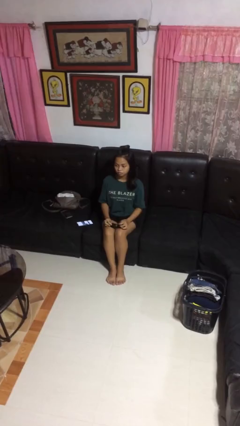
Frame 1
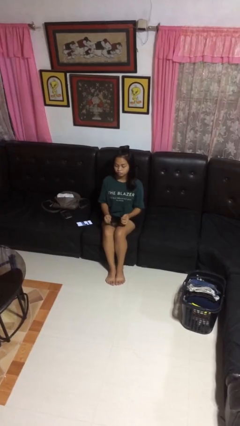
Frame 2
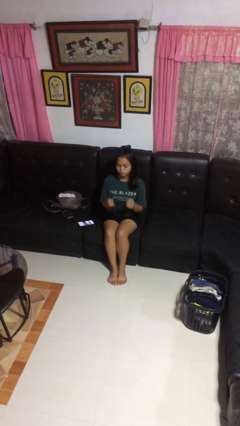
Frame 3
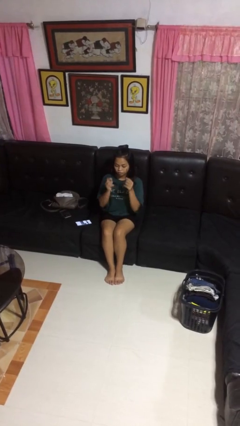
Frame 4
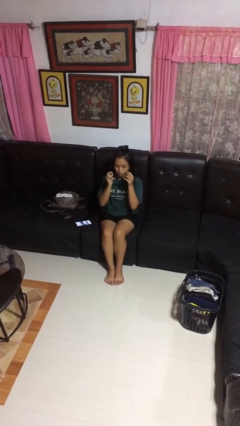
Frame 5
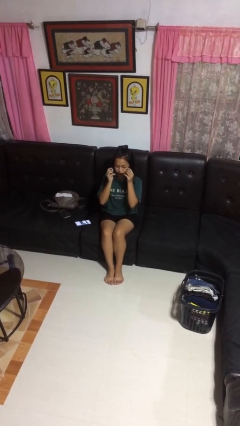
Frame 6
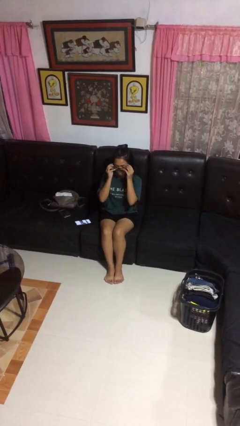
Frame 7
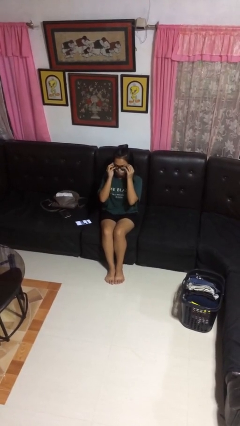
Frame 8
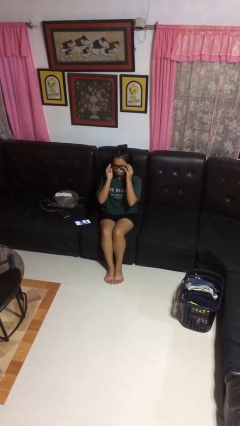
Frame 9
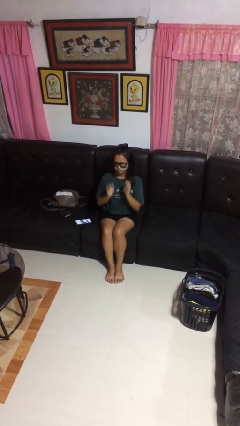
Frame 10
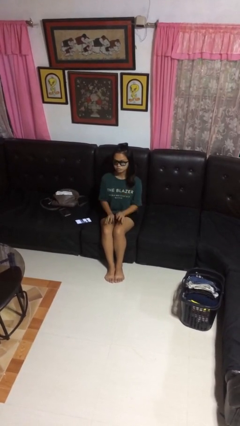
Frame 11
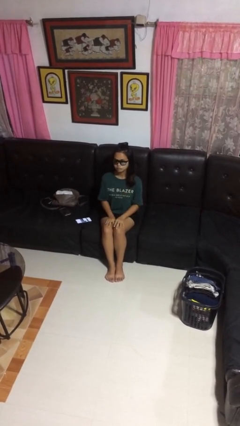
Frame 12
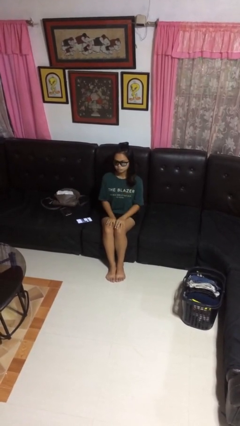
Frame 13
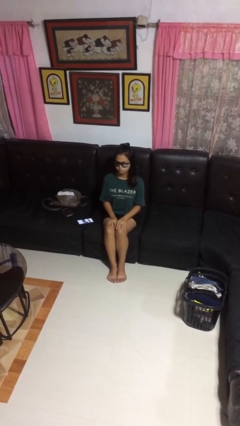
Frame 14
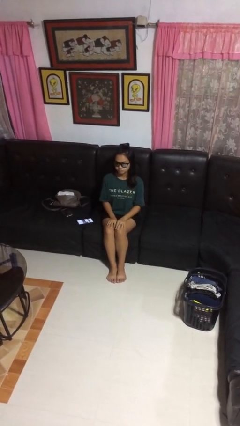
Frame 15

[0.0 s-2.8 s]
person puts on sunglasses

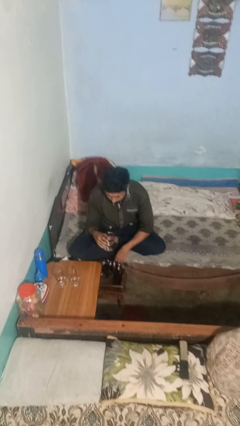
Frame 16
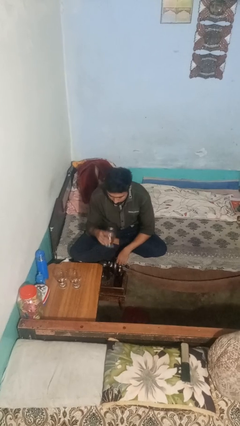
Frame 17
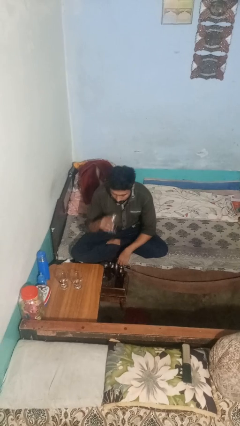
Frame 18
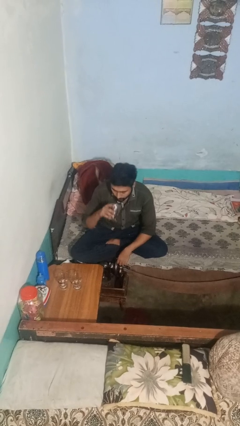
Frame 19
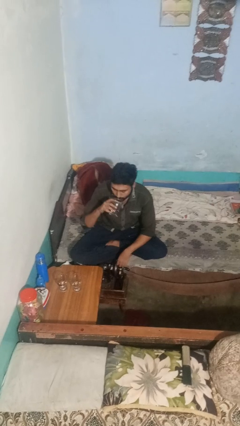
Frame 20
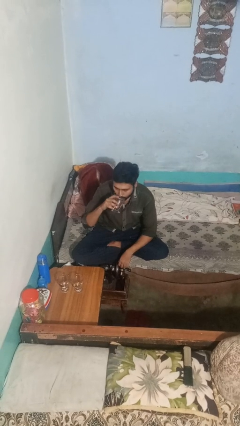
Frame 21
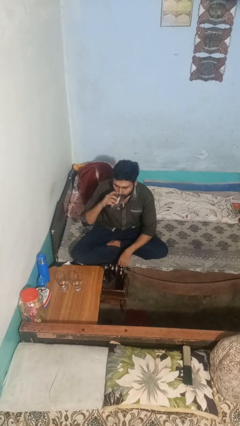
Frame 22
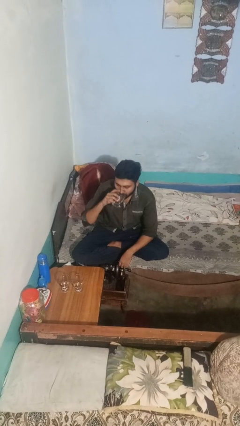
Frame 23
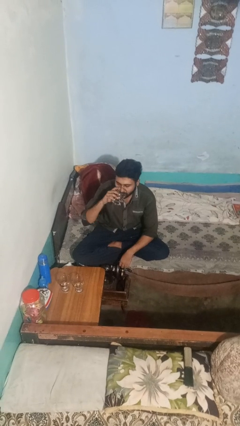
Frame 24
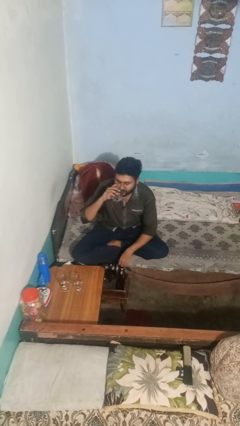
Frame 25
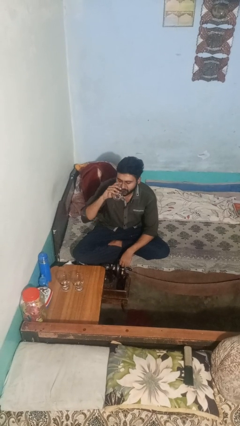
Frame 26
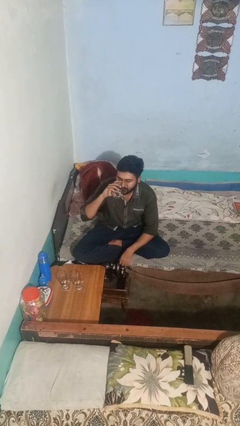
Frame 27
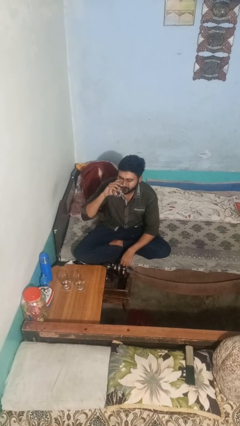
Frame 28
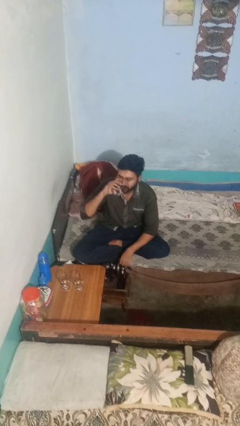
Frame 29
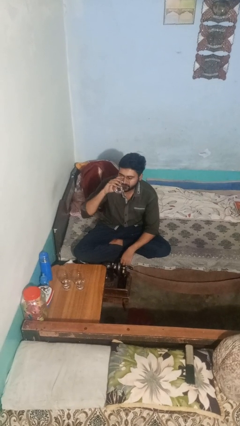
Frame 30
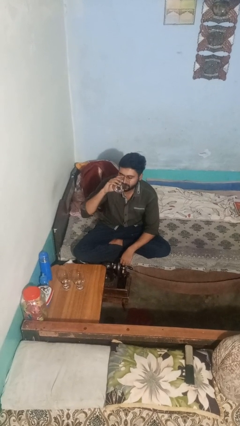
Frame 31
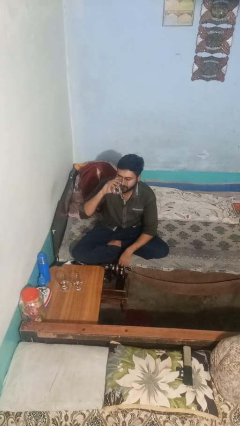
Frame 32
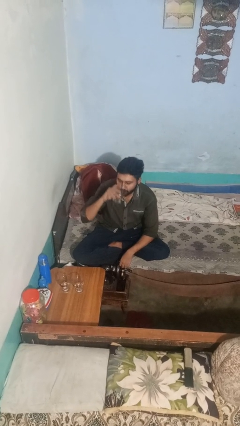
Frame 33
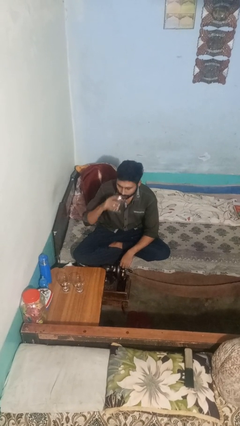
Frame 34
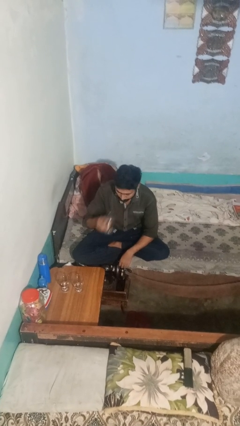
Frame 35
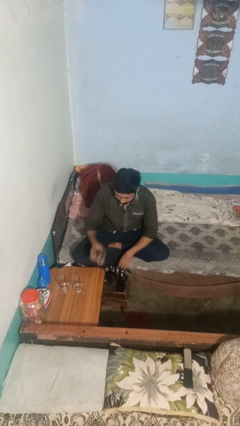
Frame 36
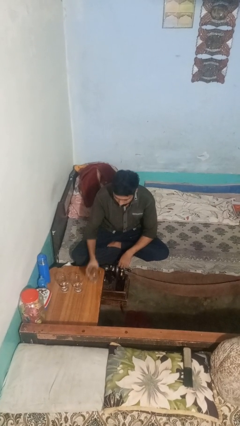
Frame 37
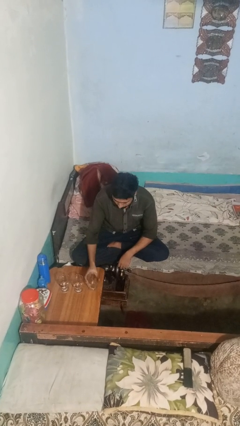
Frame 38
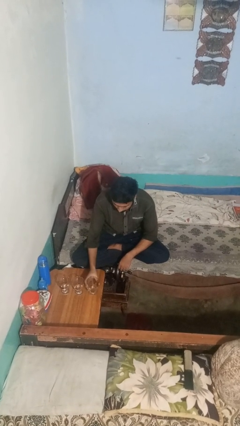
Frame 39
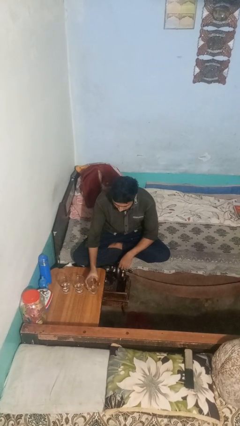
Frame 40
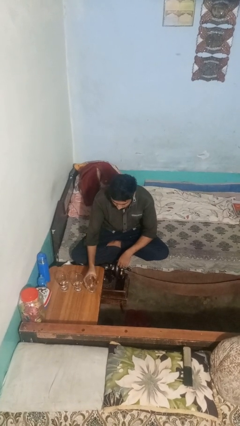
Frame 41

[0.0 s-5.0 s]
person drinks from shotglass

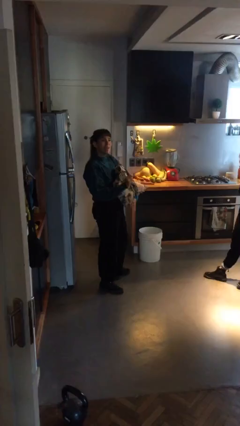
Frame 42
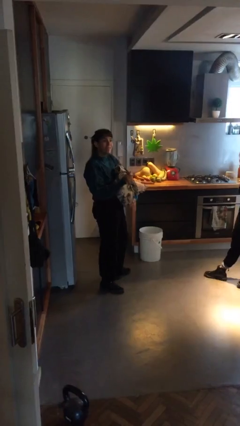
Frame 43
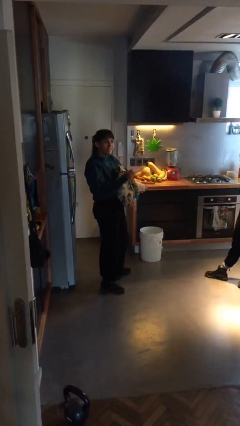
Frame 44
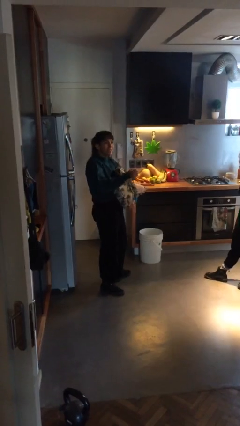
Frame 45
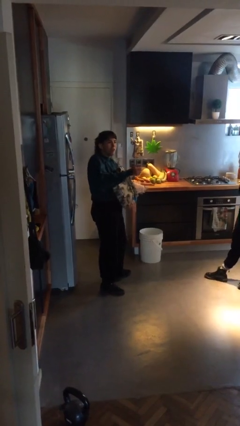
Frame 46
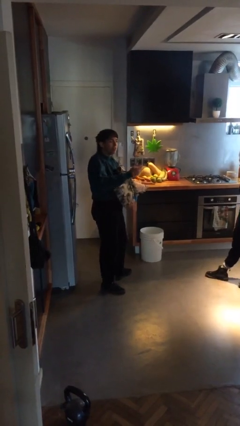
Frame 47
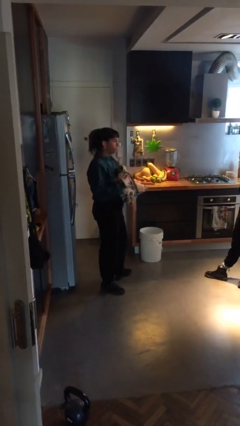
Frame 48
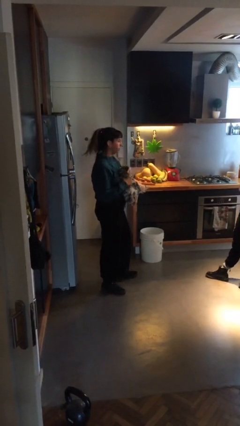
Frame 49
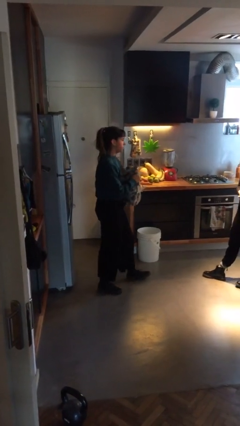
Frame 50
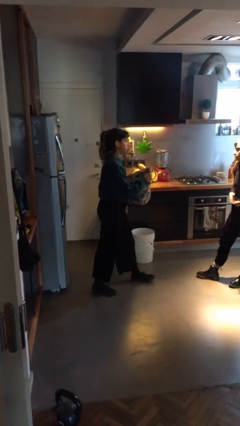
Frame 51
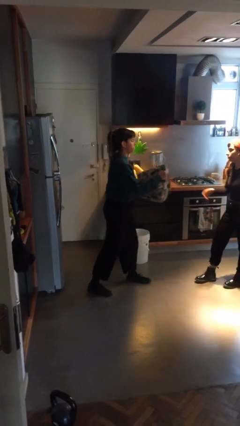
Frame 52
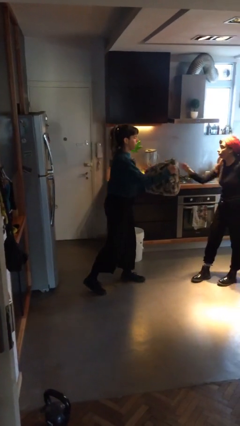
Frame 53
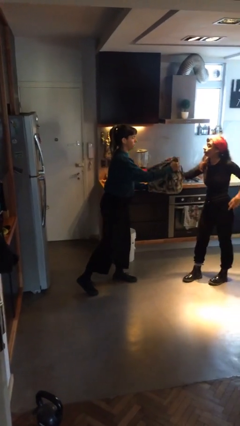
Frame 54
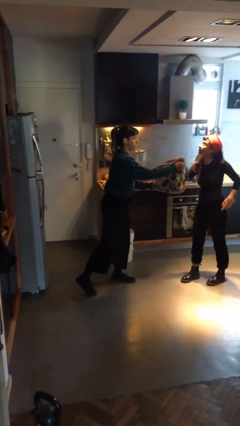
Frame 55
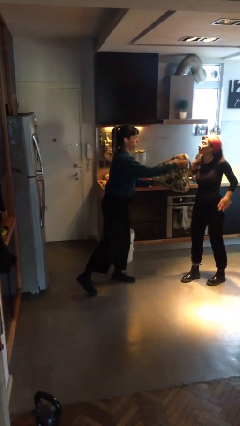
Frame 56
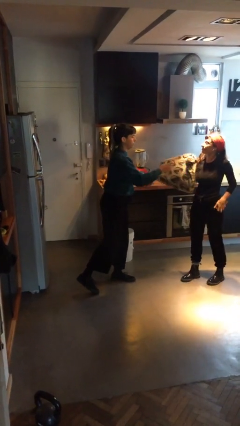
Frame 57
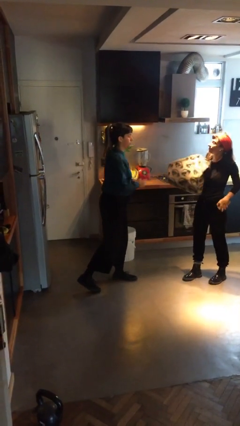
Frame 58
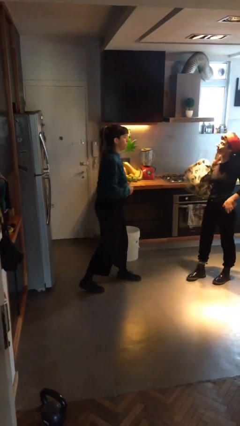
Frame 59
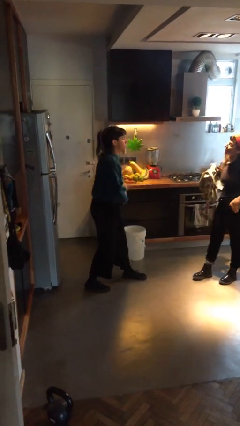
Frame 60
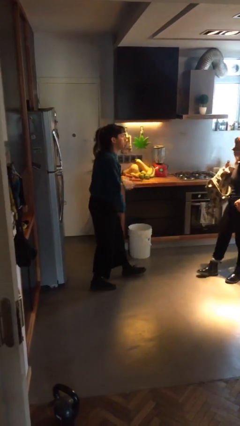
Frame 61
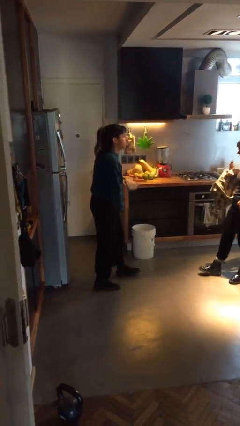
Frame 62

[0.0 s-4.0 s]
person transfers object to person

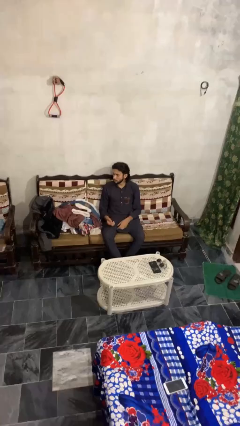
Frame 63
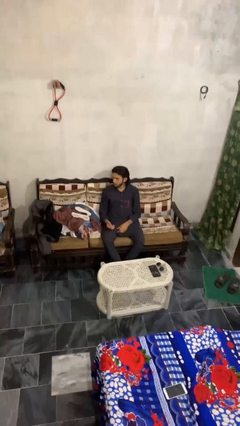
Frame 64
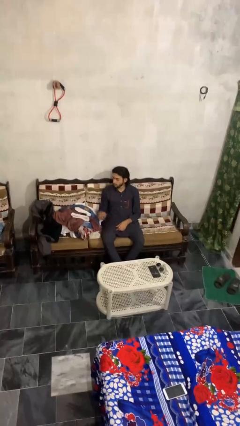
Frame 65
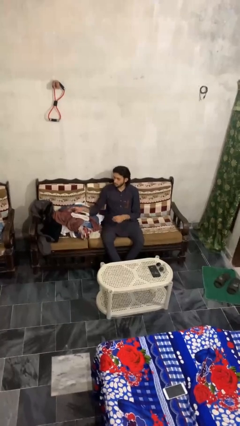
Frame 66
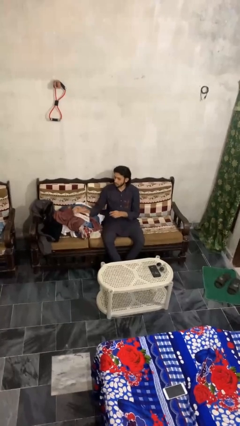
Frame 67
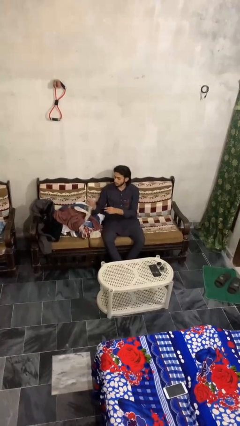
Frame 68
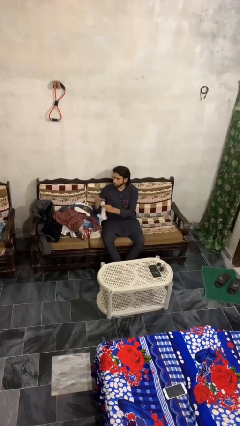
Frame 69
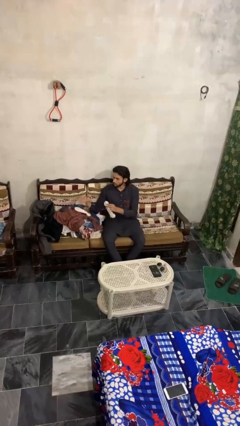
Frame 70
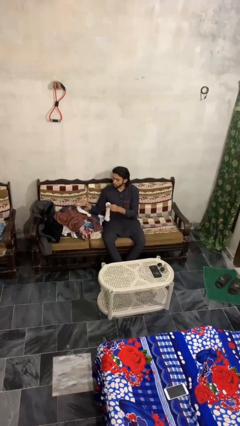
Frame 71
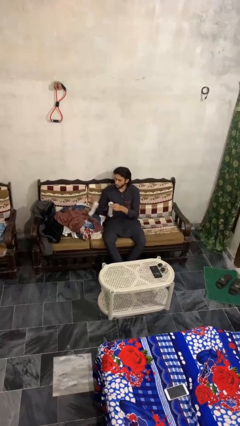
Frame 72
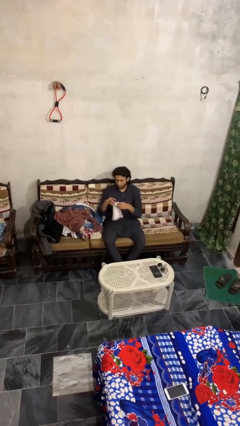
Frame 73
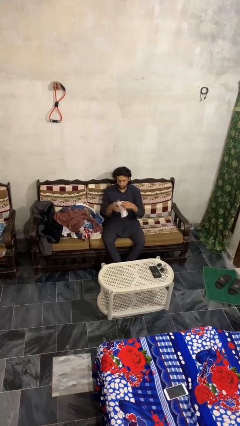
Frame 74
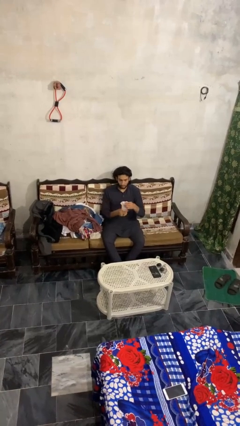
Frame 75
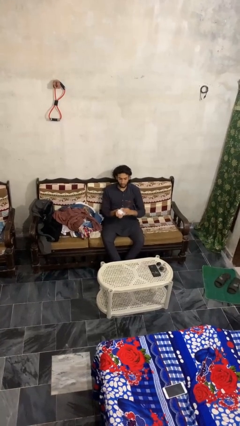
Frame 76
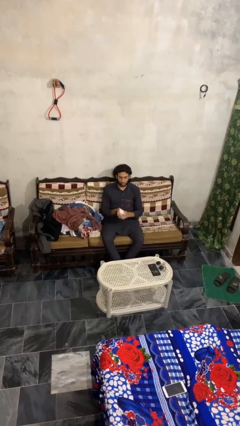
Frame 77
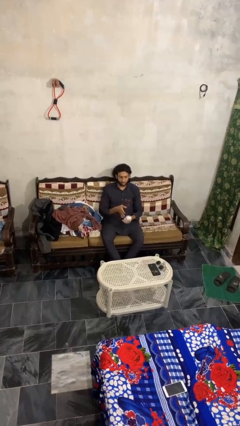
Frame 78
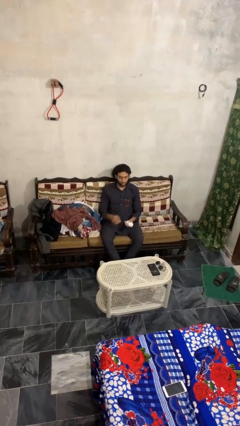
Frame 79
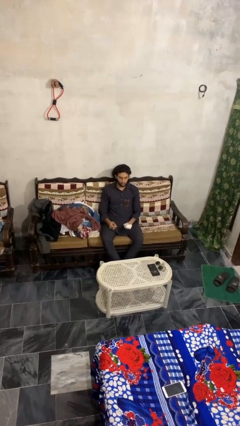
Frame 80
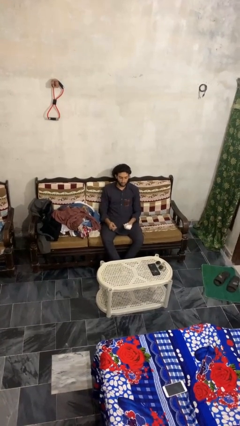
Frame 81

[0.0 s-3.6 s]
person folds socks

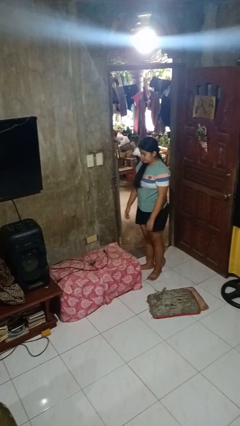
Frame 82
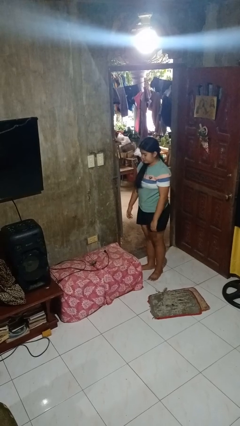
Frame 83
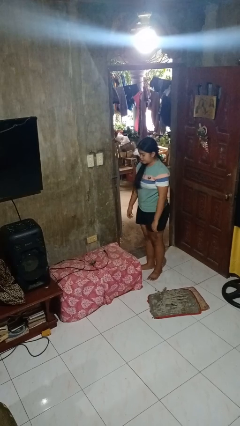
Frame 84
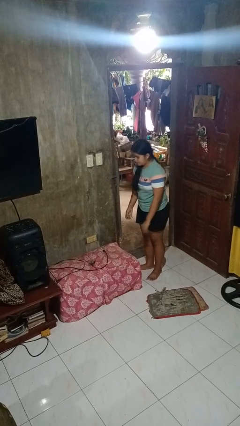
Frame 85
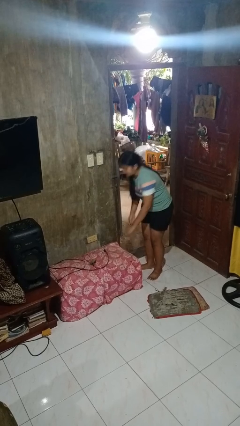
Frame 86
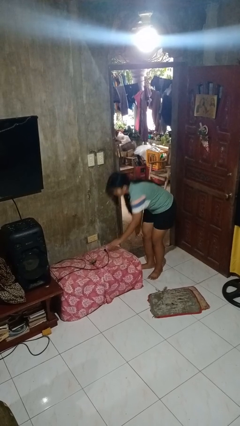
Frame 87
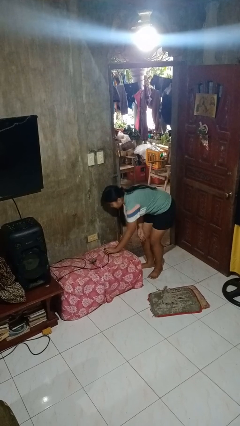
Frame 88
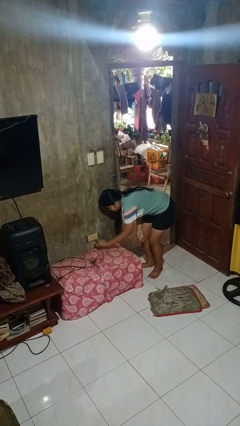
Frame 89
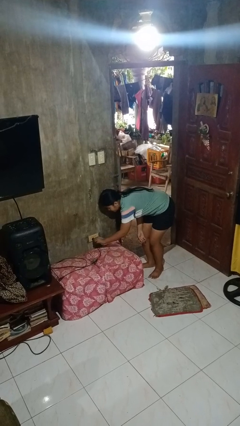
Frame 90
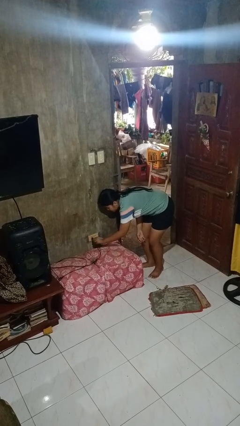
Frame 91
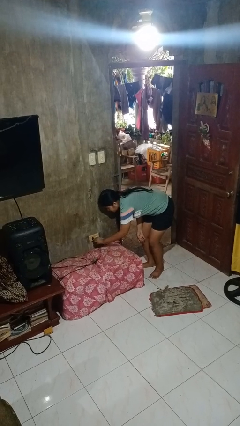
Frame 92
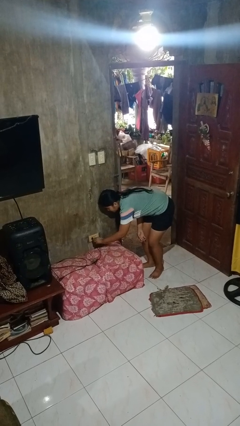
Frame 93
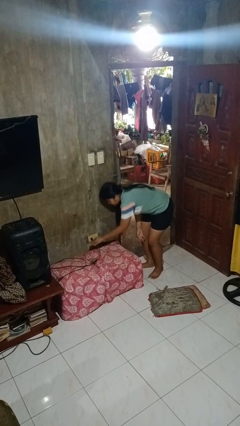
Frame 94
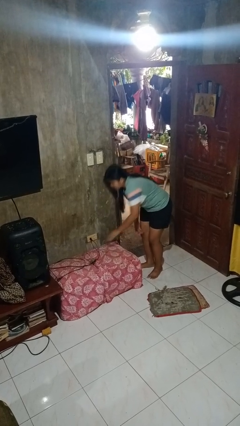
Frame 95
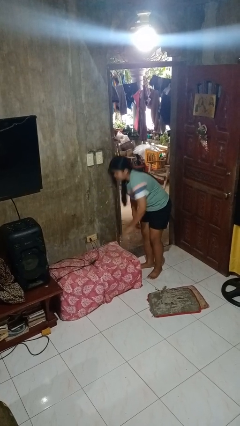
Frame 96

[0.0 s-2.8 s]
person plugs into electrical socket
